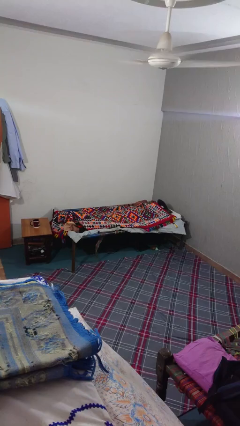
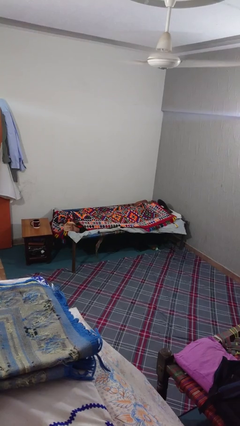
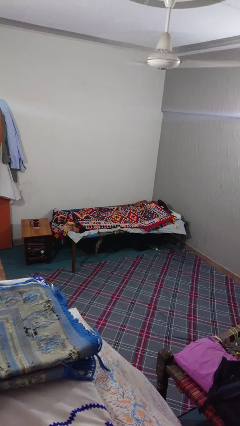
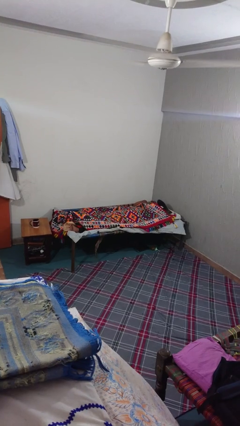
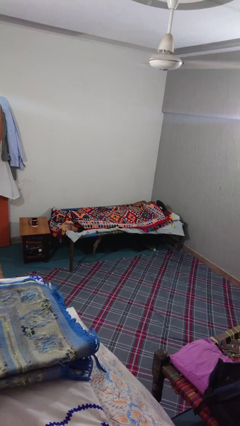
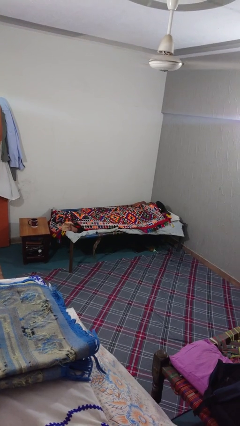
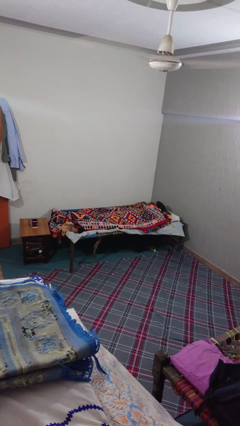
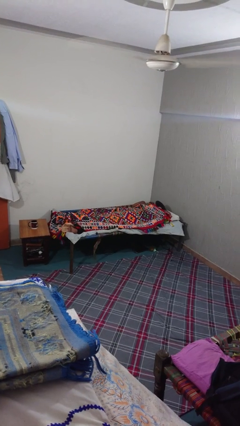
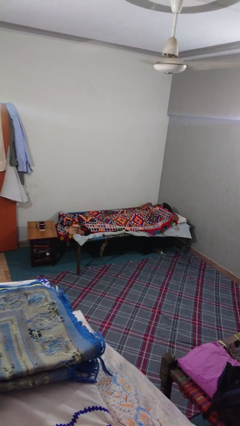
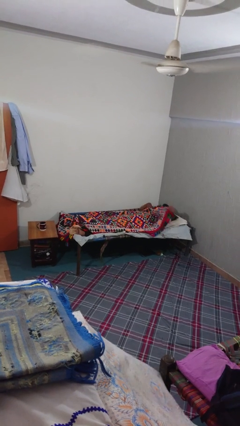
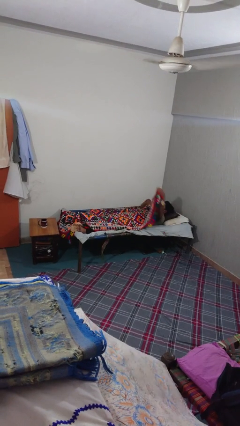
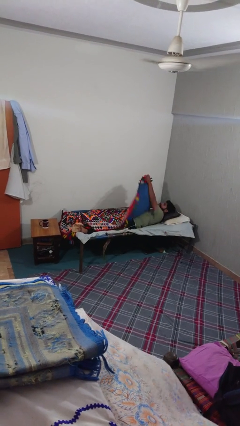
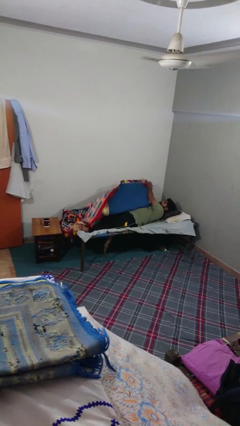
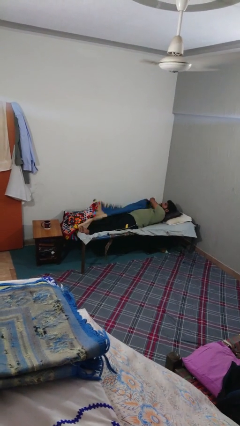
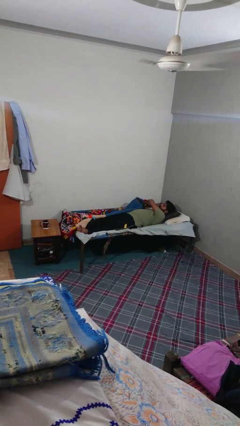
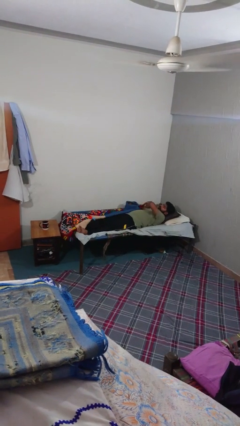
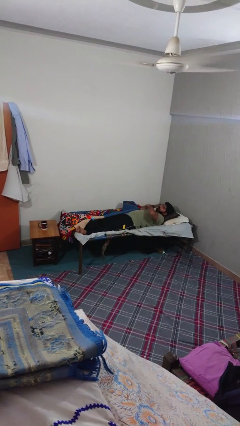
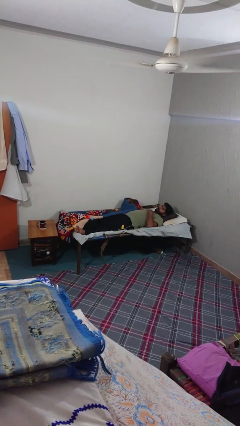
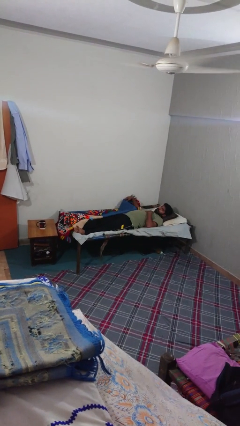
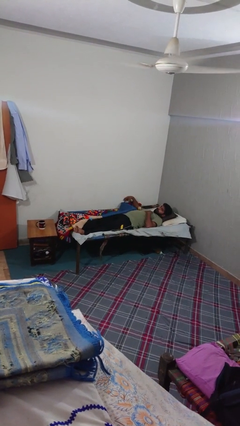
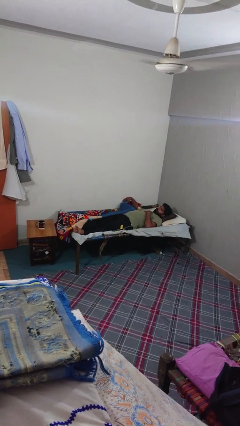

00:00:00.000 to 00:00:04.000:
person uncovers with blanket

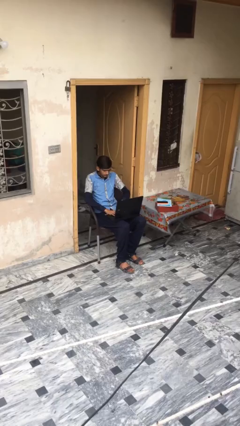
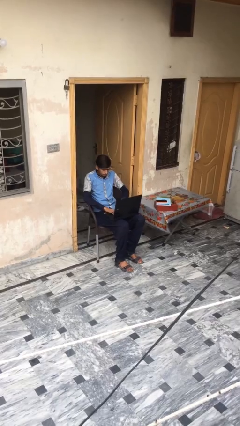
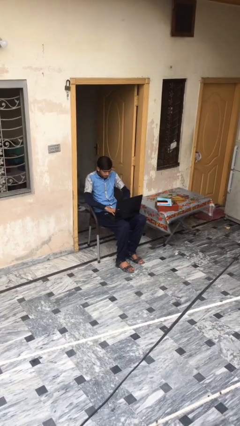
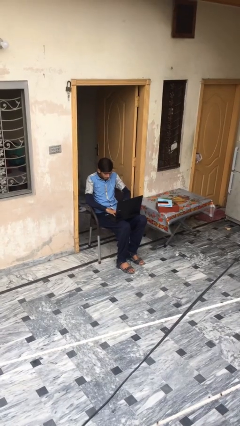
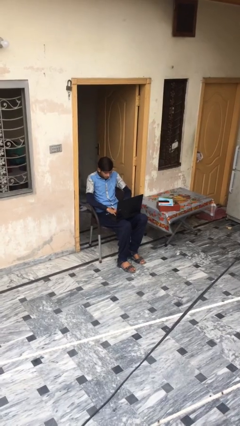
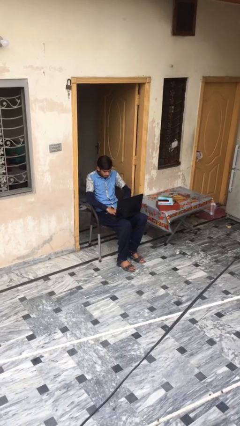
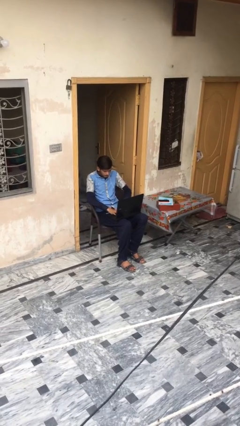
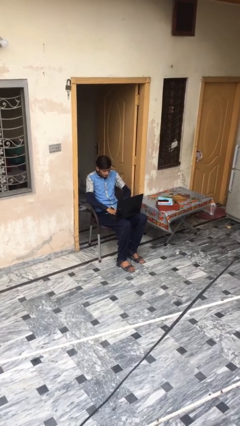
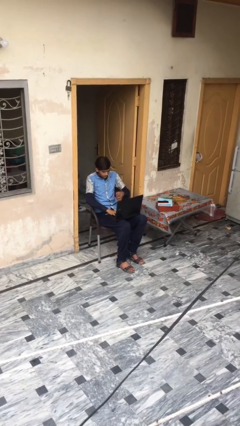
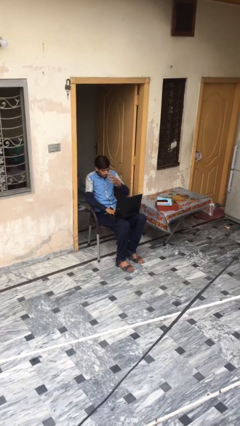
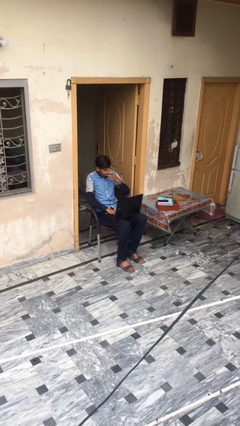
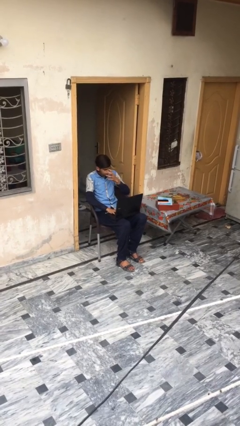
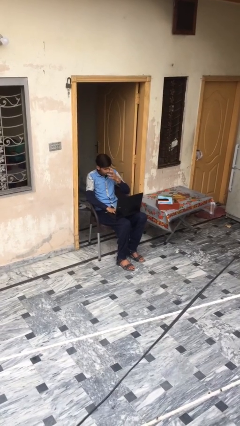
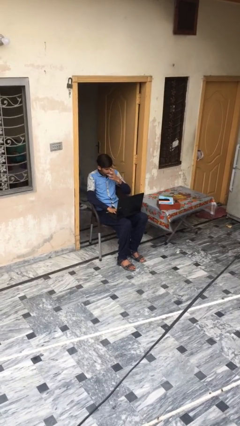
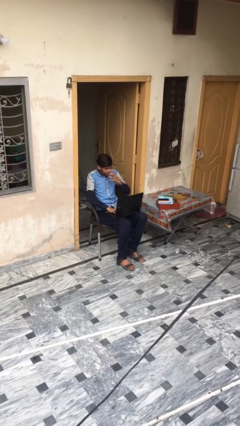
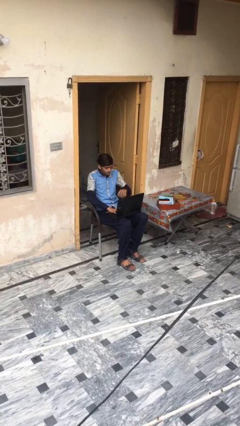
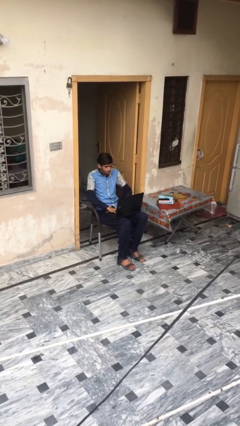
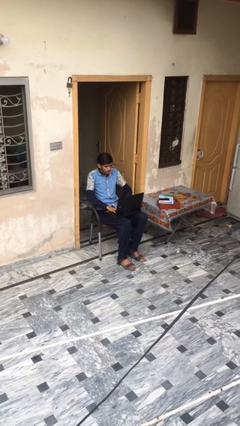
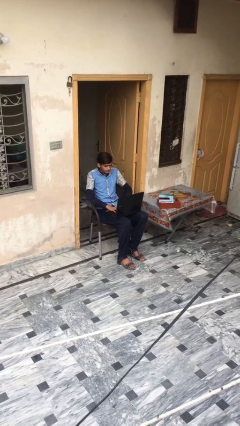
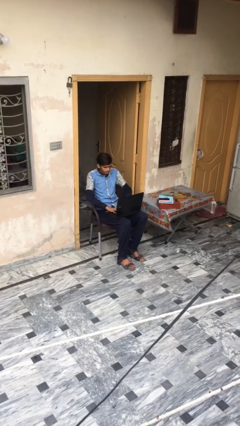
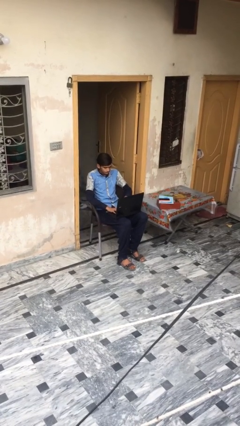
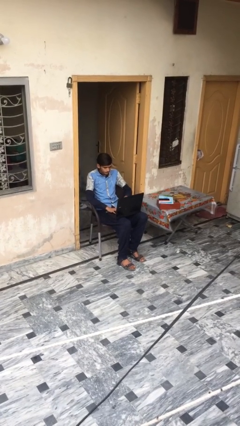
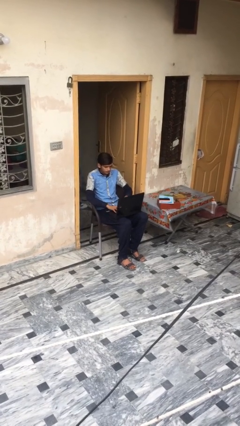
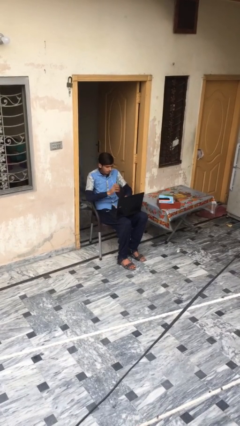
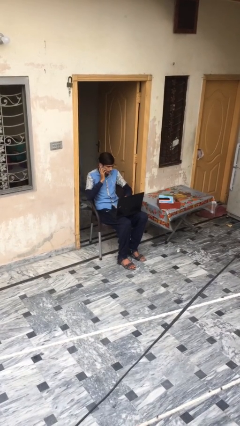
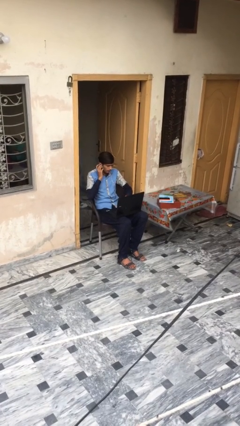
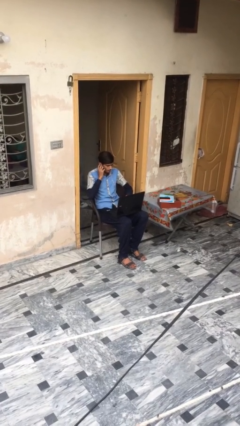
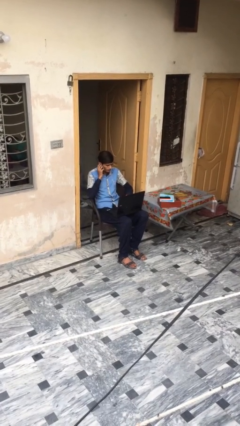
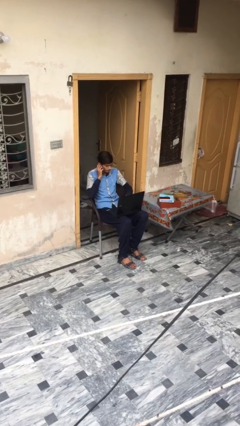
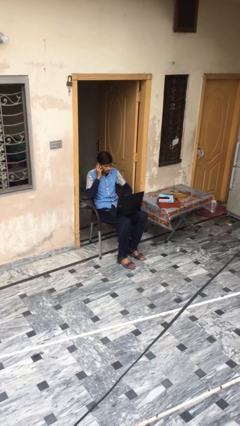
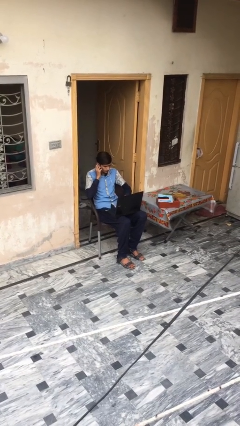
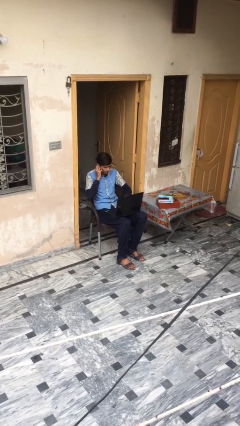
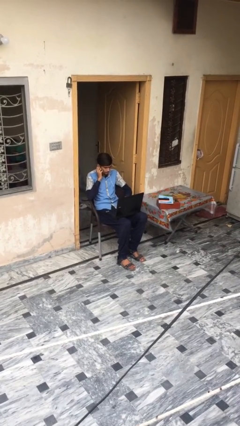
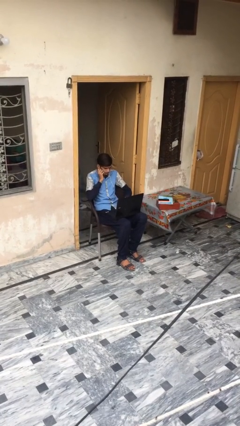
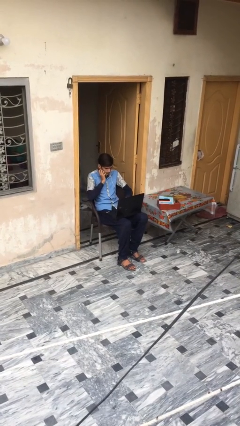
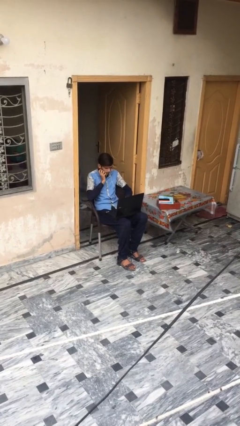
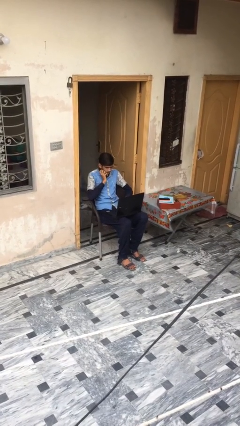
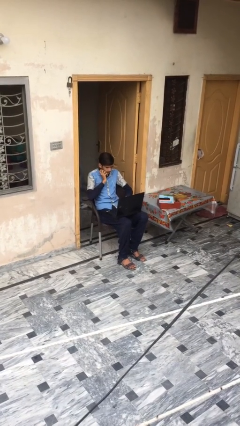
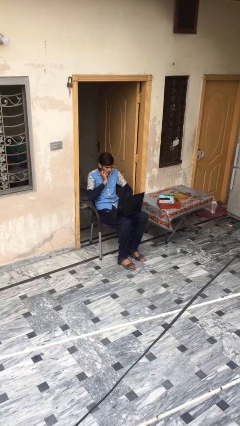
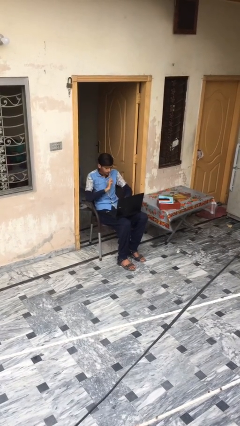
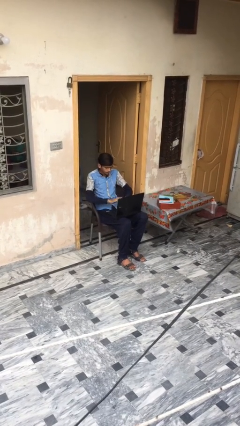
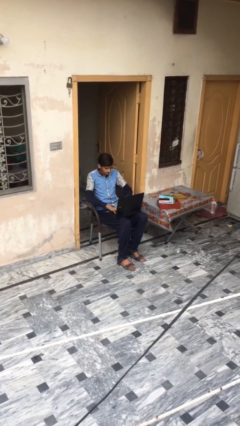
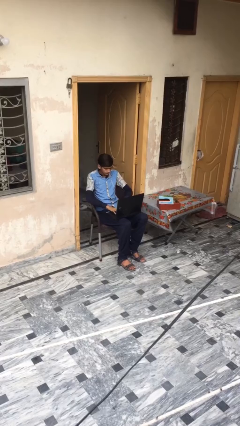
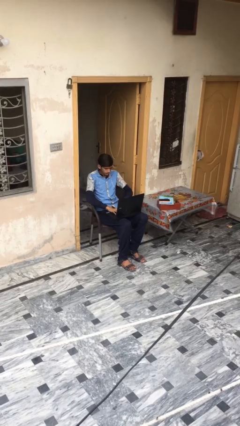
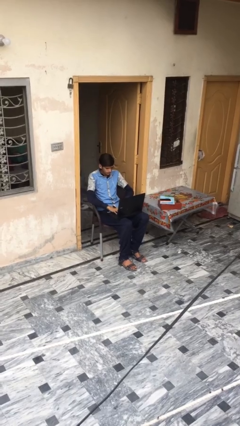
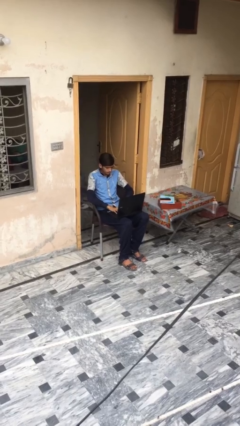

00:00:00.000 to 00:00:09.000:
person interacts with laptop

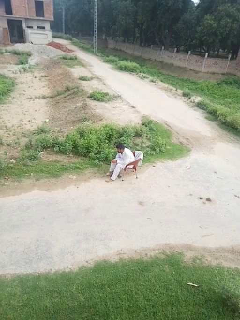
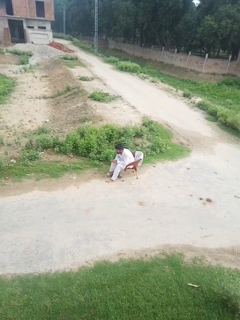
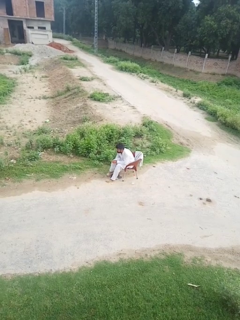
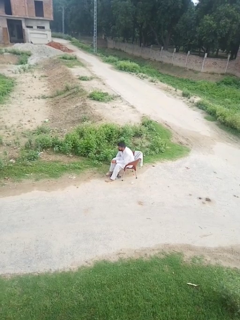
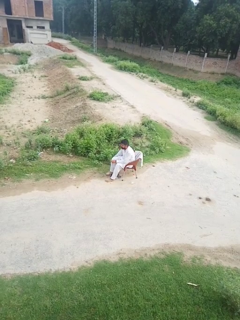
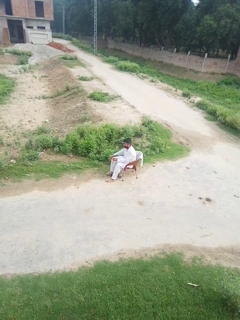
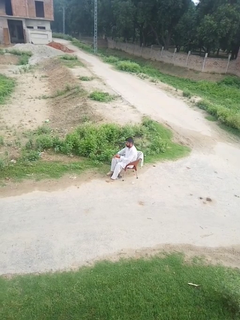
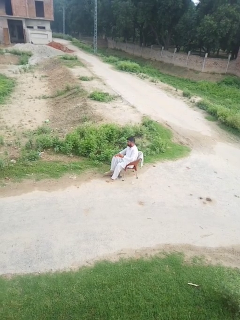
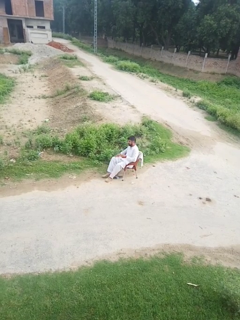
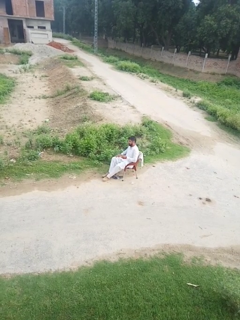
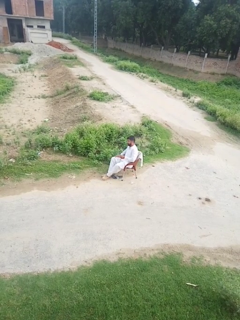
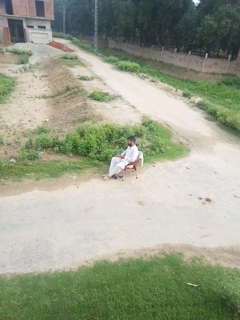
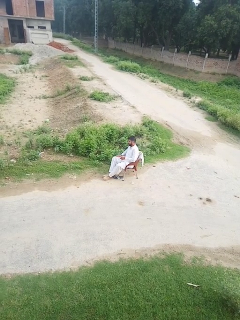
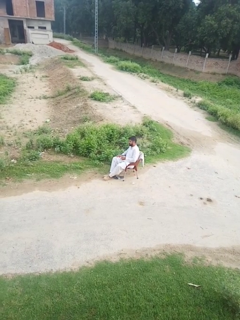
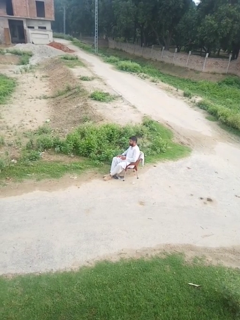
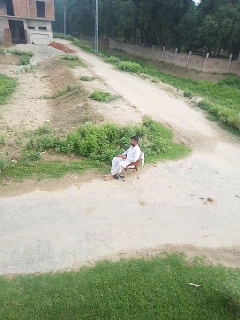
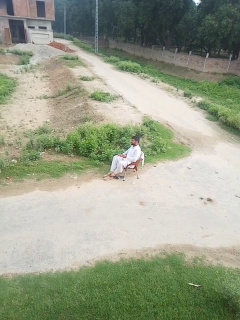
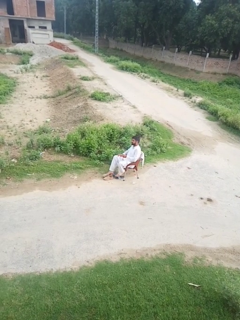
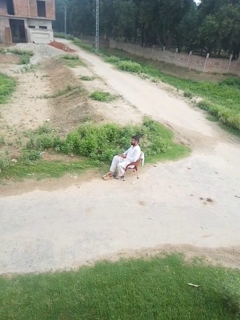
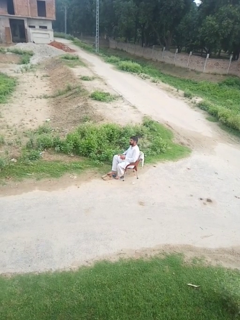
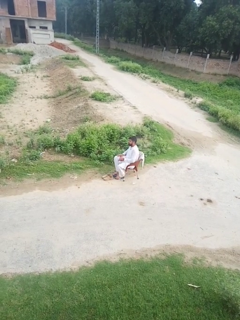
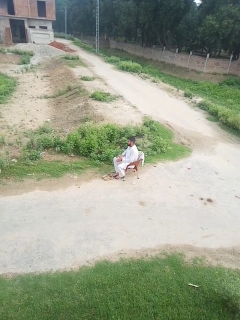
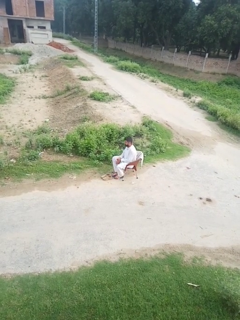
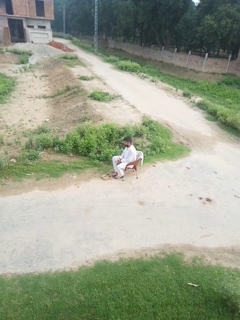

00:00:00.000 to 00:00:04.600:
person takes off shoes

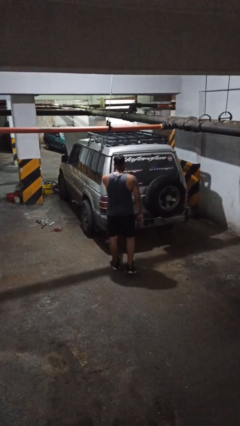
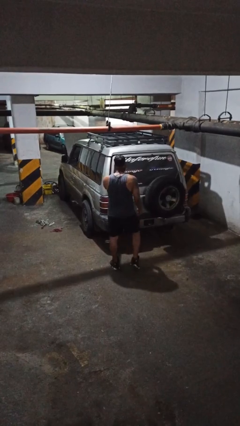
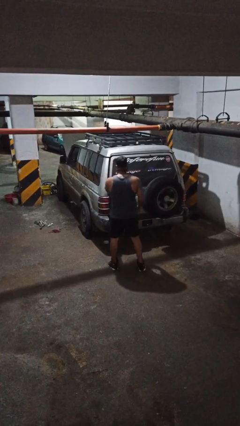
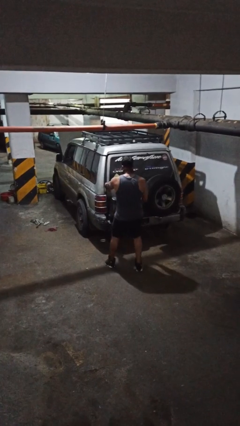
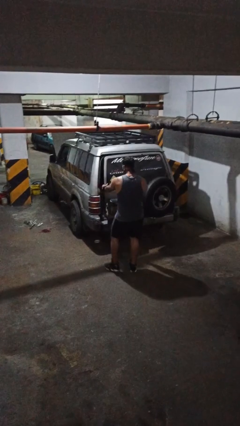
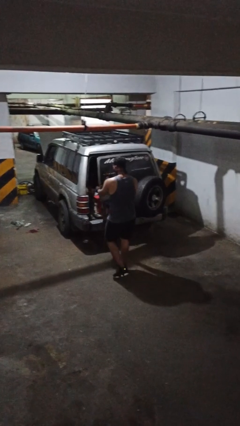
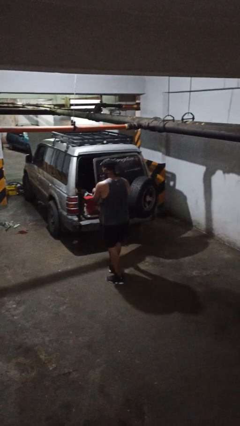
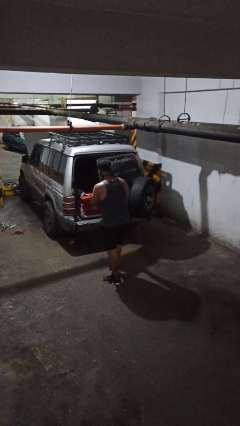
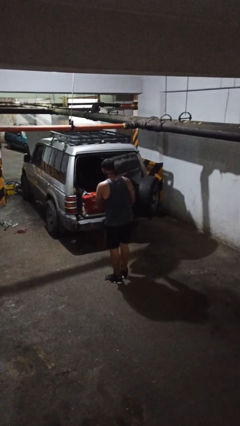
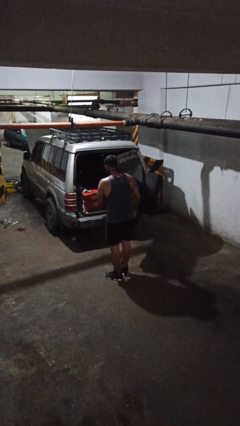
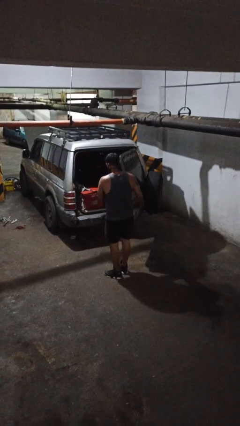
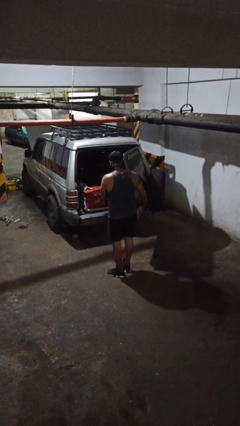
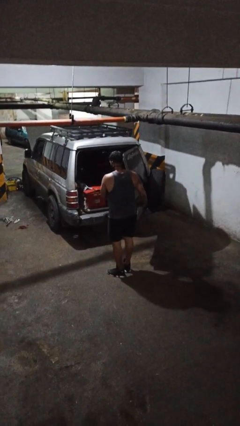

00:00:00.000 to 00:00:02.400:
person opens car trunk
